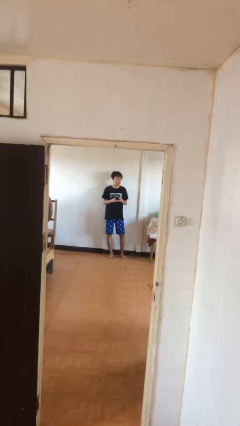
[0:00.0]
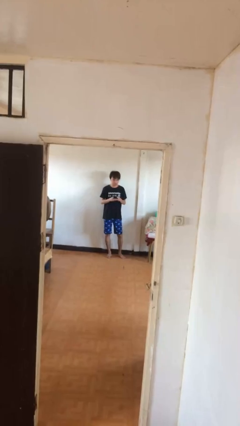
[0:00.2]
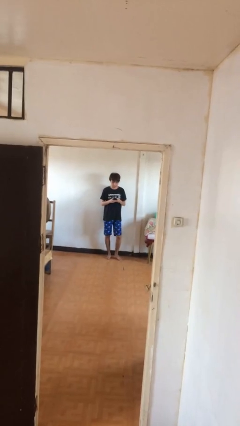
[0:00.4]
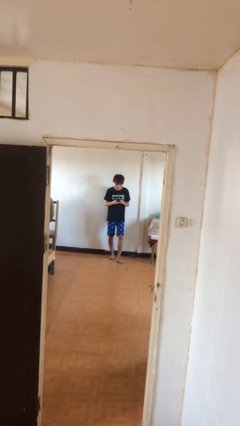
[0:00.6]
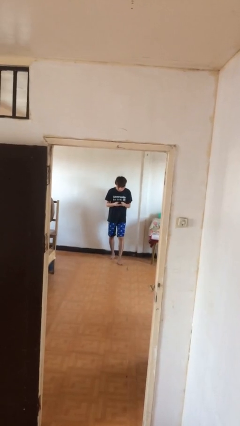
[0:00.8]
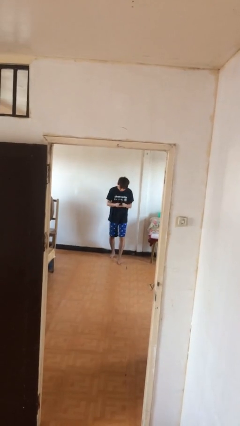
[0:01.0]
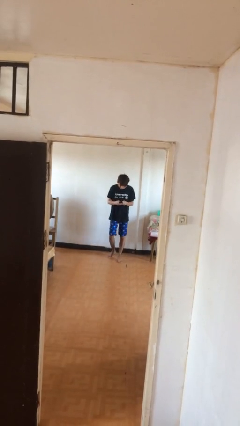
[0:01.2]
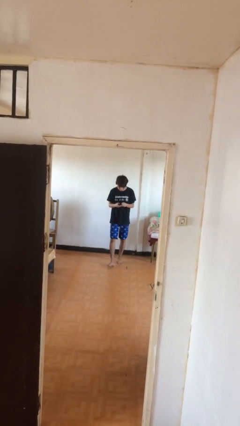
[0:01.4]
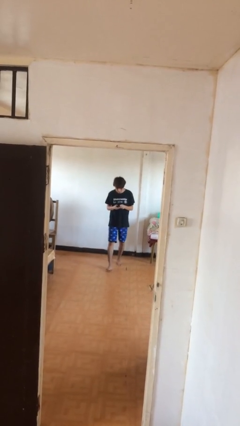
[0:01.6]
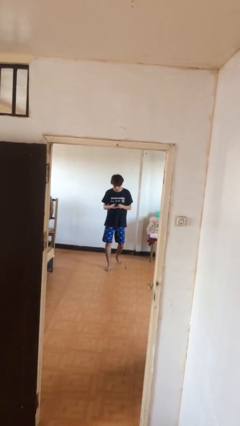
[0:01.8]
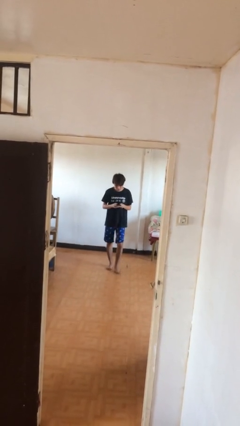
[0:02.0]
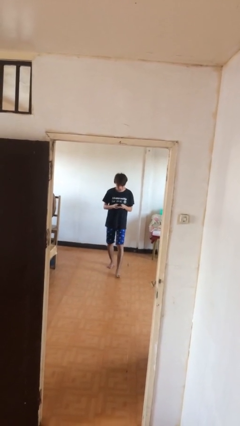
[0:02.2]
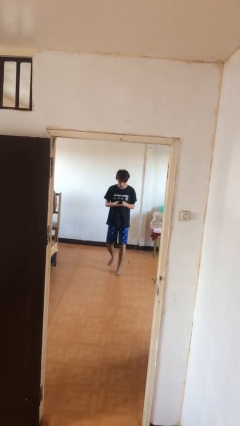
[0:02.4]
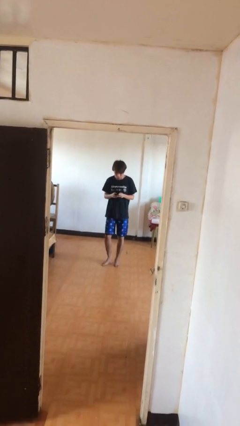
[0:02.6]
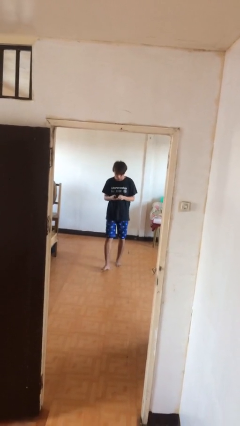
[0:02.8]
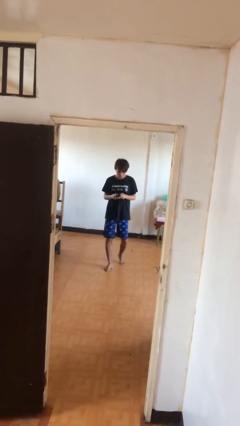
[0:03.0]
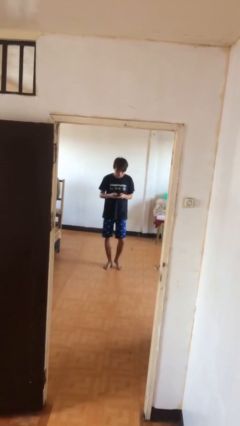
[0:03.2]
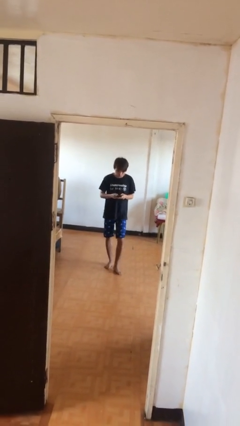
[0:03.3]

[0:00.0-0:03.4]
person texts on phone

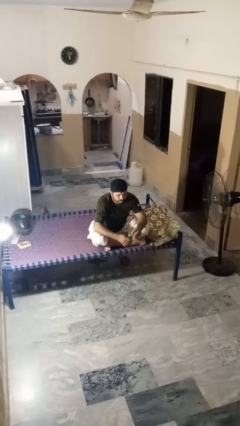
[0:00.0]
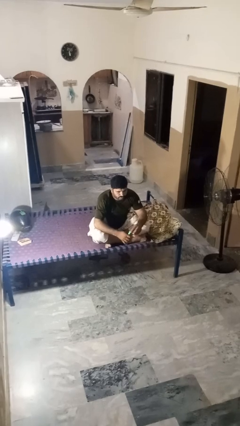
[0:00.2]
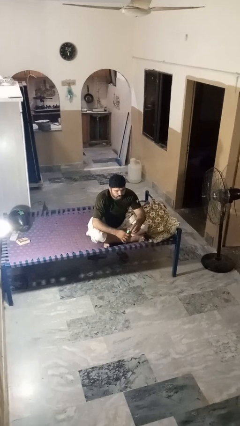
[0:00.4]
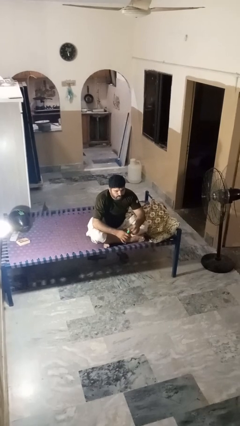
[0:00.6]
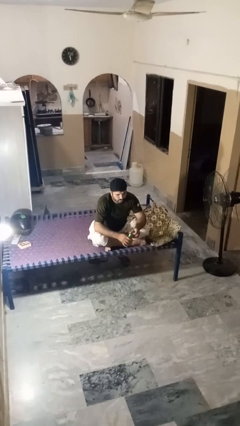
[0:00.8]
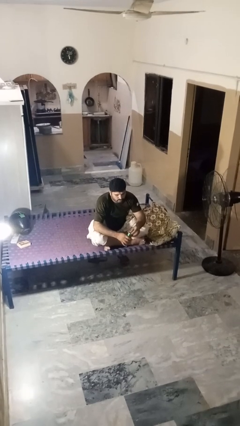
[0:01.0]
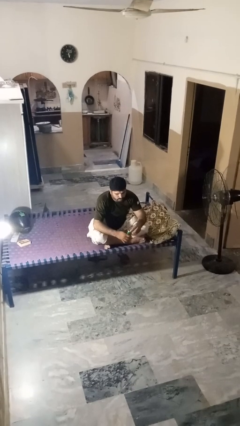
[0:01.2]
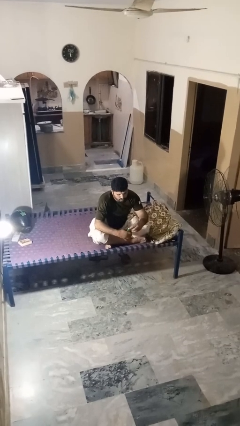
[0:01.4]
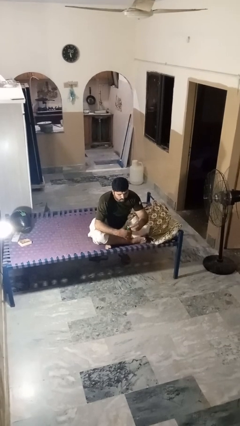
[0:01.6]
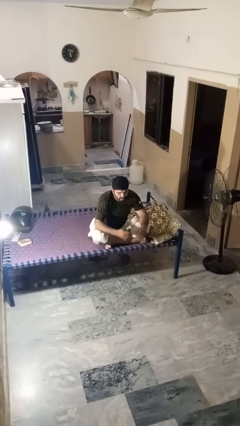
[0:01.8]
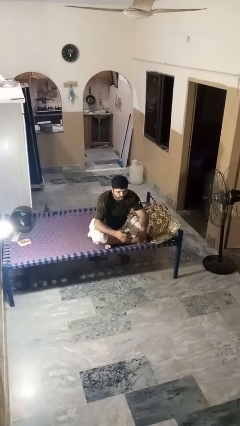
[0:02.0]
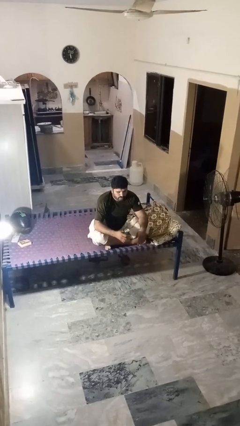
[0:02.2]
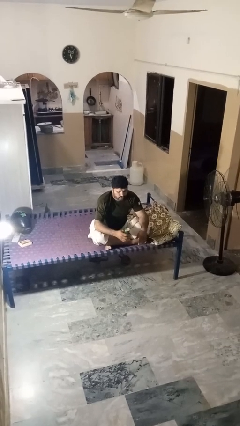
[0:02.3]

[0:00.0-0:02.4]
person opens beverage can

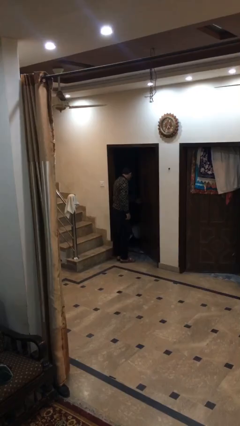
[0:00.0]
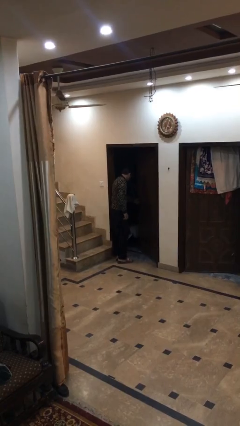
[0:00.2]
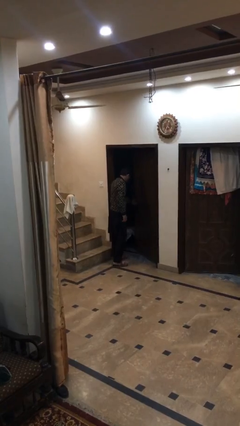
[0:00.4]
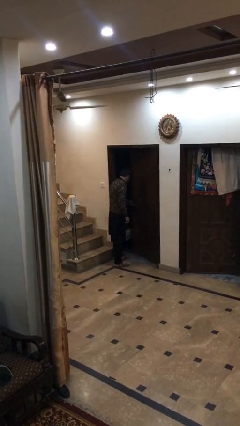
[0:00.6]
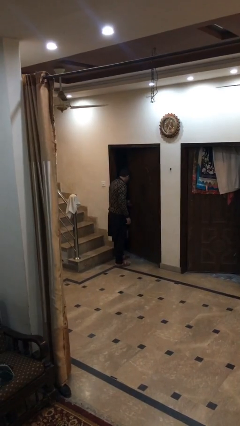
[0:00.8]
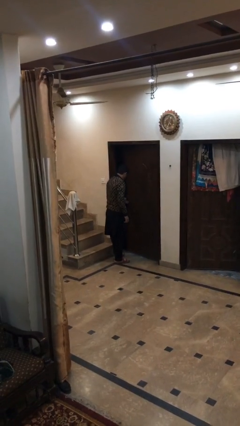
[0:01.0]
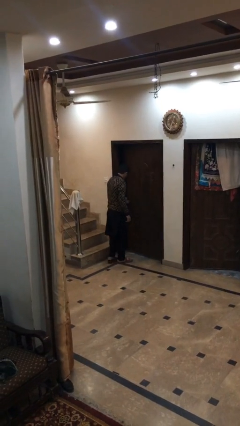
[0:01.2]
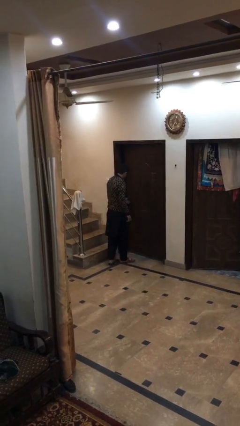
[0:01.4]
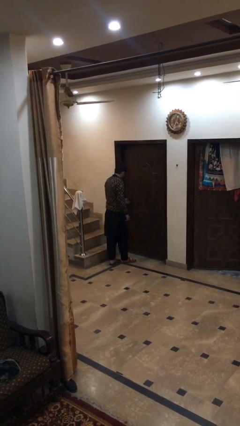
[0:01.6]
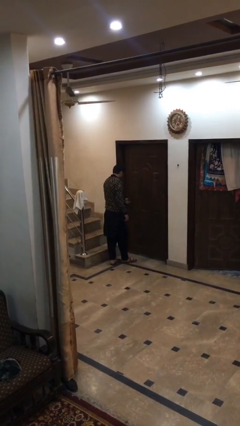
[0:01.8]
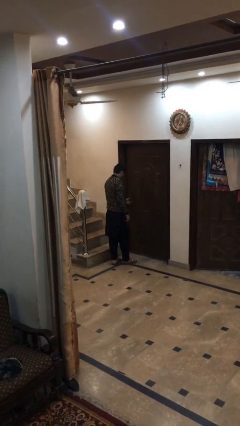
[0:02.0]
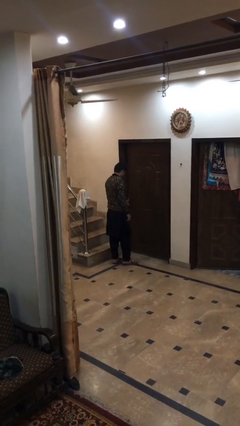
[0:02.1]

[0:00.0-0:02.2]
person closes facility door

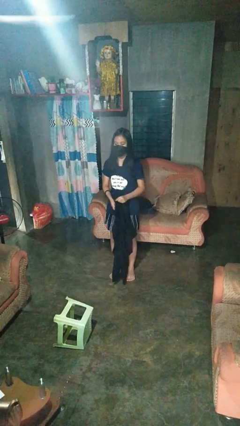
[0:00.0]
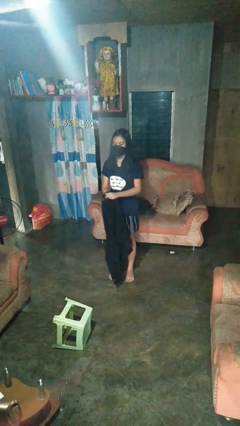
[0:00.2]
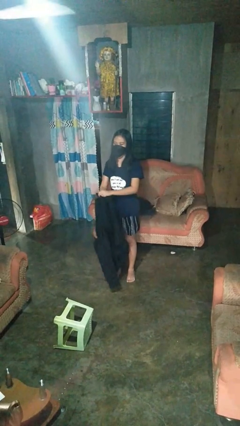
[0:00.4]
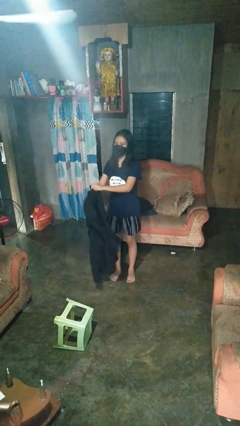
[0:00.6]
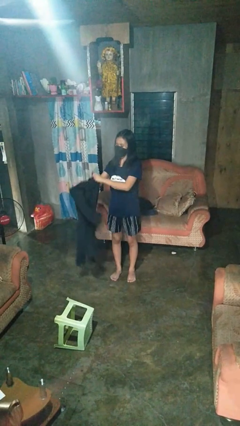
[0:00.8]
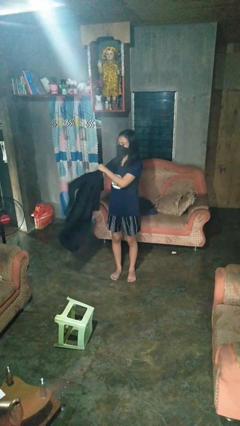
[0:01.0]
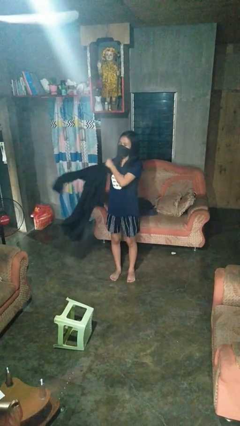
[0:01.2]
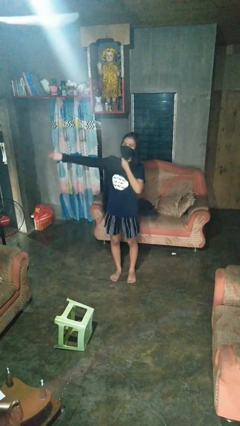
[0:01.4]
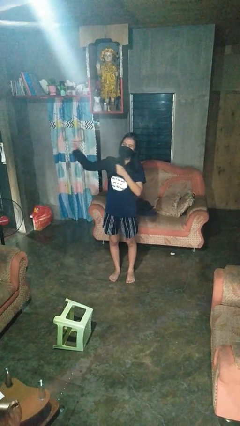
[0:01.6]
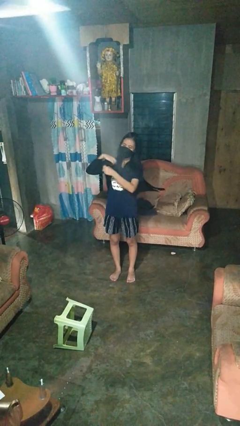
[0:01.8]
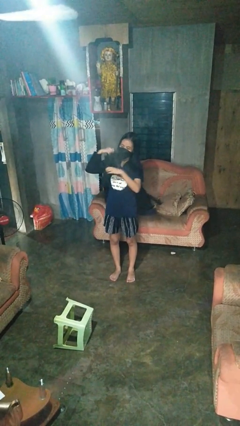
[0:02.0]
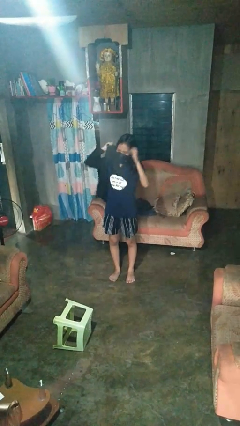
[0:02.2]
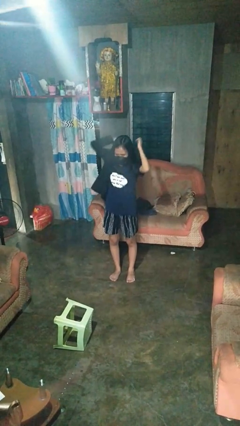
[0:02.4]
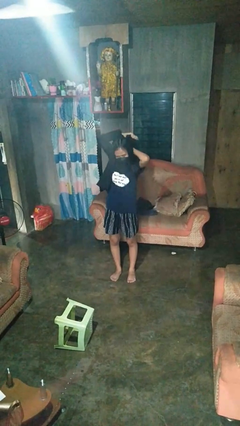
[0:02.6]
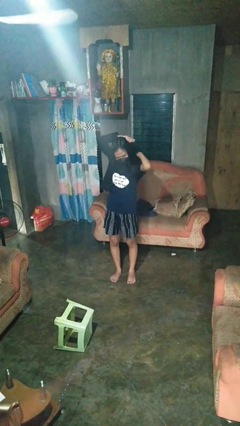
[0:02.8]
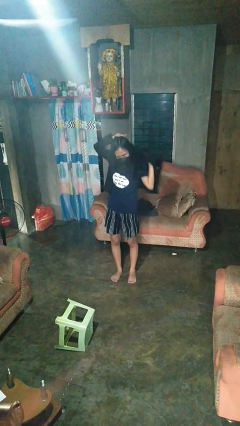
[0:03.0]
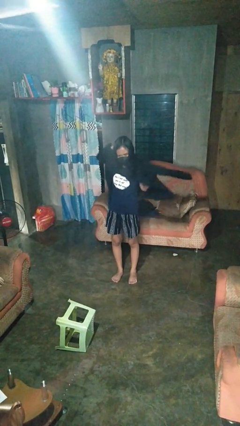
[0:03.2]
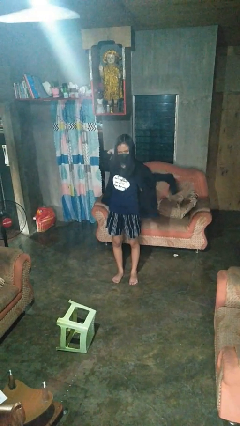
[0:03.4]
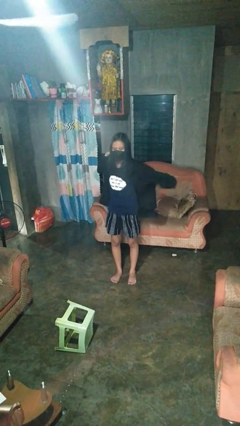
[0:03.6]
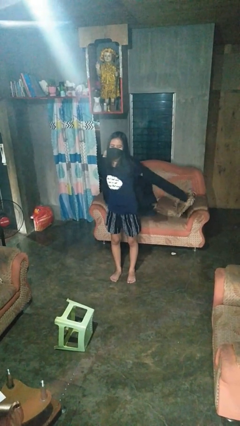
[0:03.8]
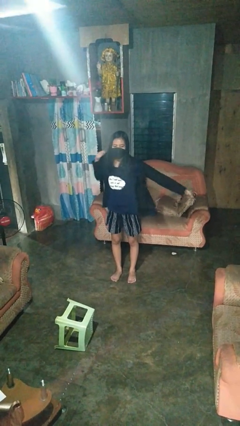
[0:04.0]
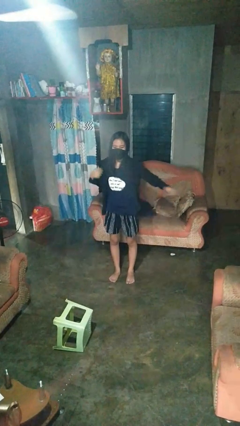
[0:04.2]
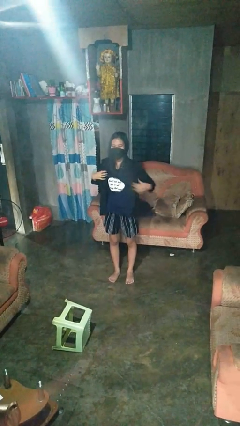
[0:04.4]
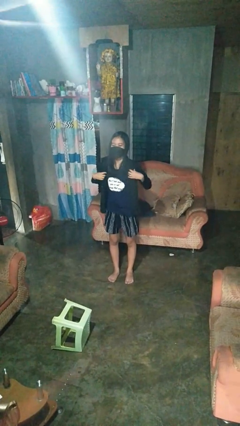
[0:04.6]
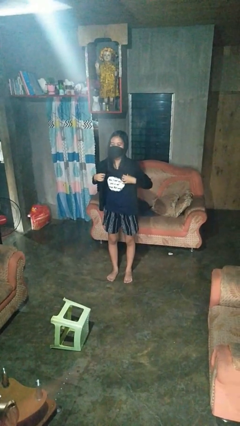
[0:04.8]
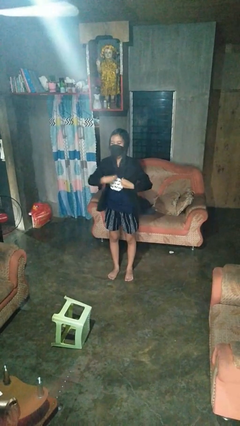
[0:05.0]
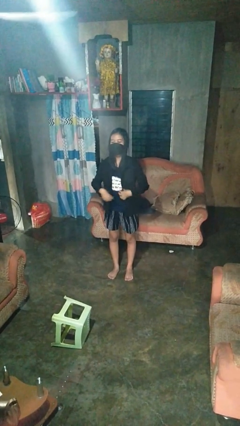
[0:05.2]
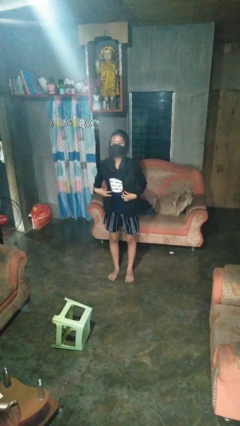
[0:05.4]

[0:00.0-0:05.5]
person puts on shirt

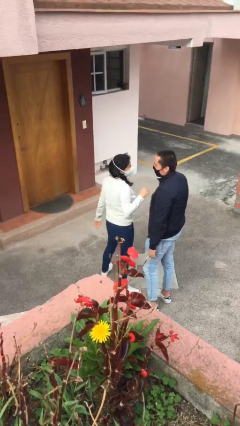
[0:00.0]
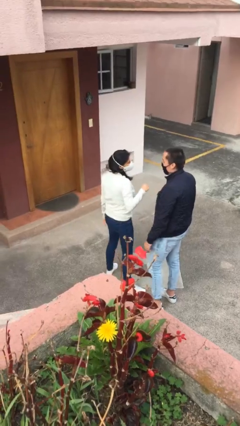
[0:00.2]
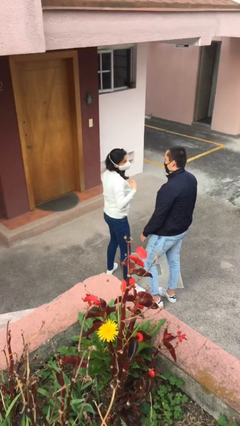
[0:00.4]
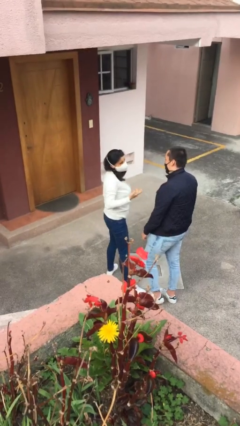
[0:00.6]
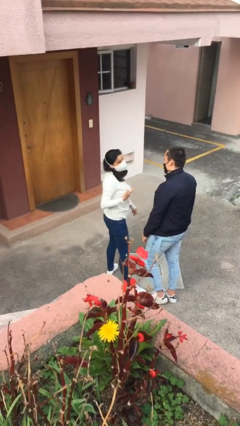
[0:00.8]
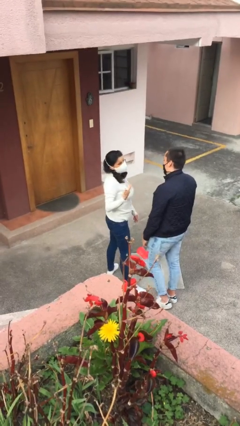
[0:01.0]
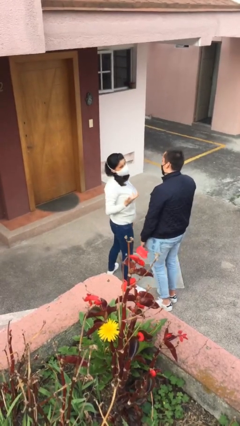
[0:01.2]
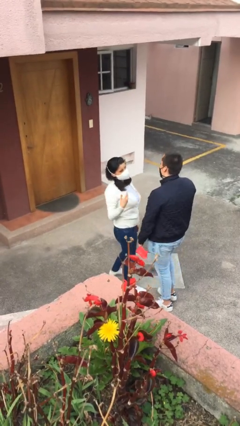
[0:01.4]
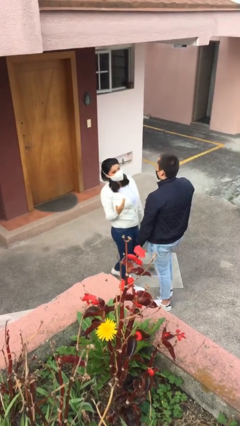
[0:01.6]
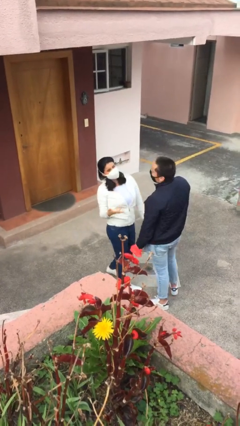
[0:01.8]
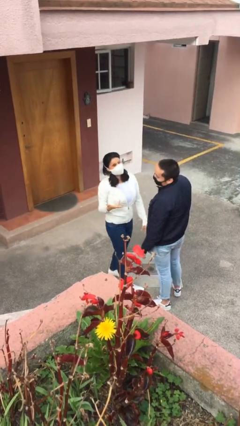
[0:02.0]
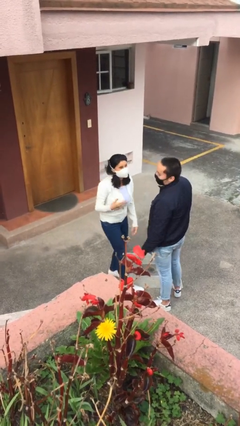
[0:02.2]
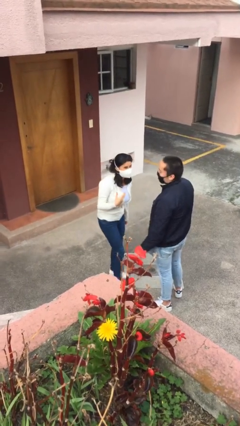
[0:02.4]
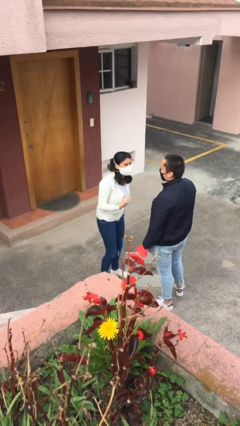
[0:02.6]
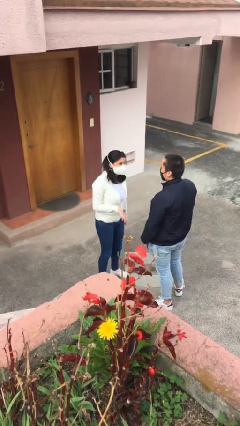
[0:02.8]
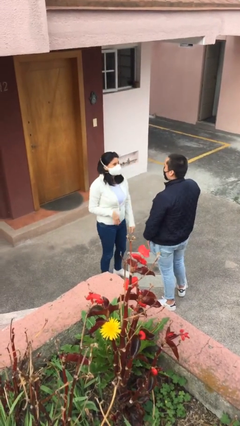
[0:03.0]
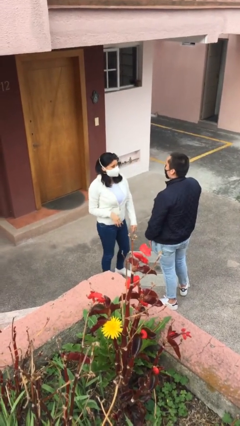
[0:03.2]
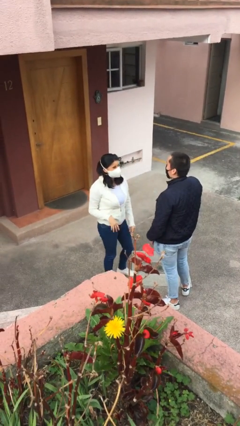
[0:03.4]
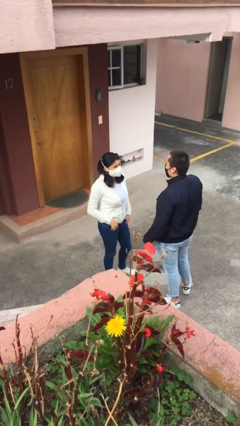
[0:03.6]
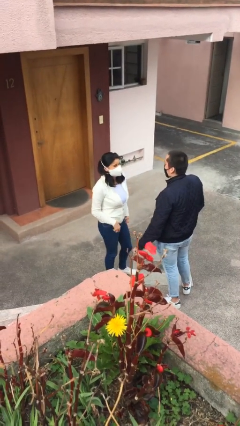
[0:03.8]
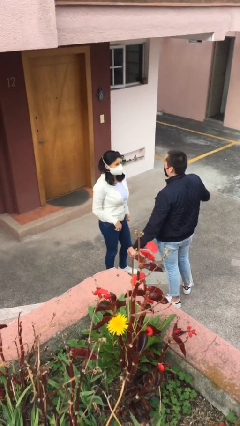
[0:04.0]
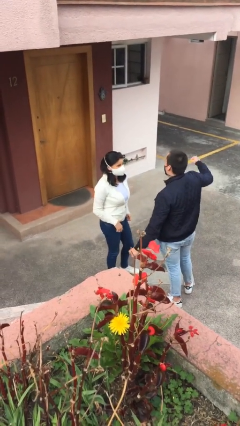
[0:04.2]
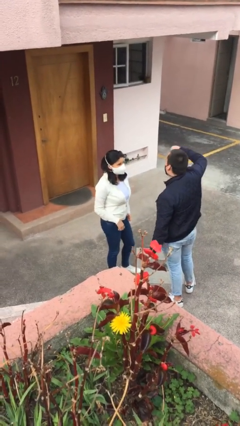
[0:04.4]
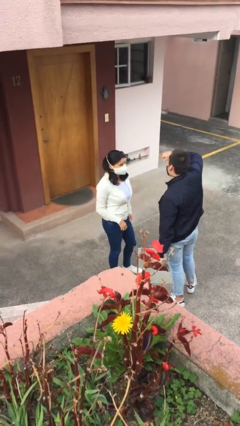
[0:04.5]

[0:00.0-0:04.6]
person talks to person
